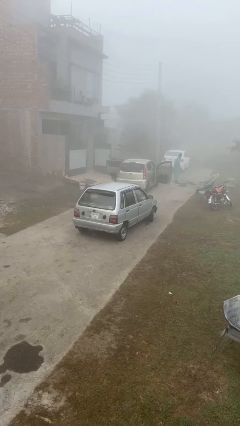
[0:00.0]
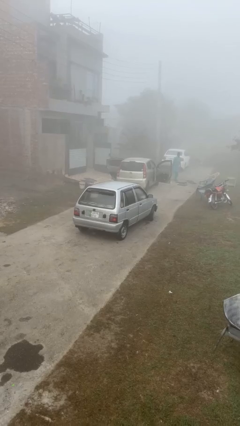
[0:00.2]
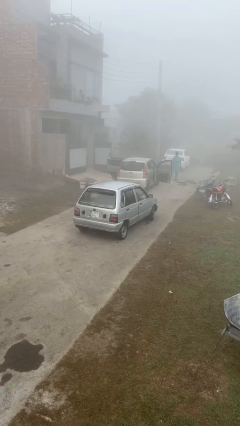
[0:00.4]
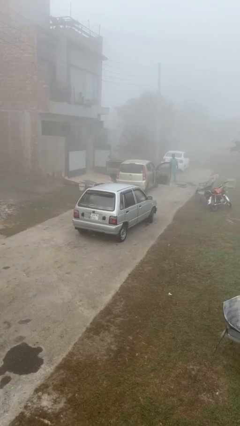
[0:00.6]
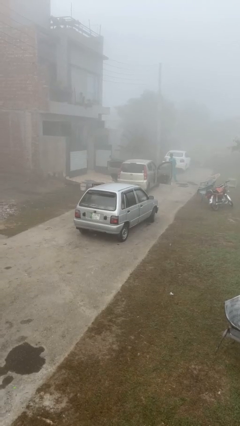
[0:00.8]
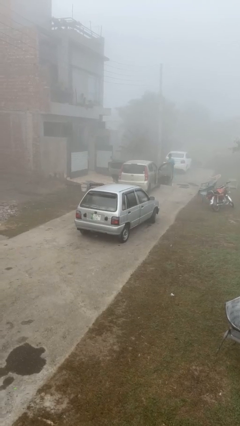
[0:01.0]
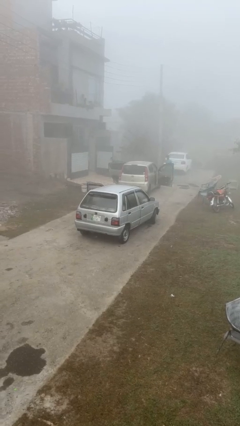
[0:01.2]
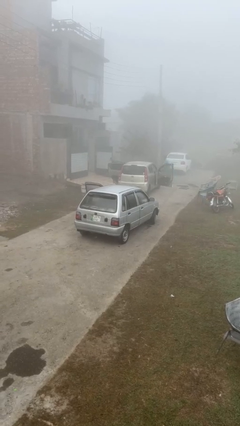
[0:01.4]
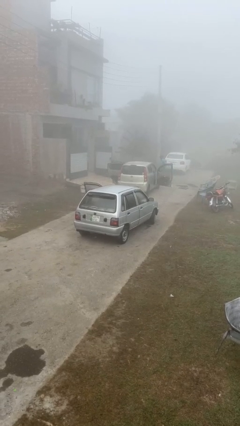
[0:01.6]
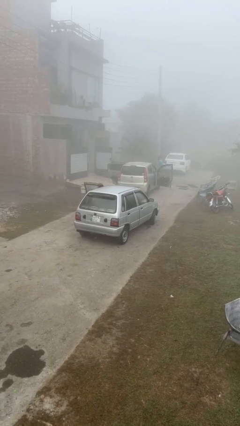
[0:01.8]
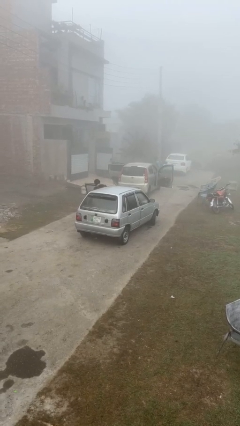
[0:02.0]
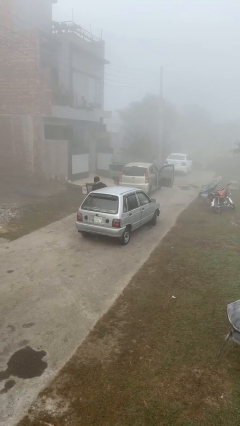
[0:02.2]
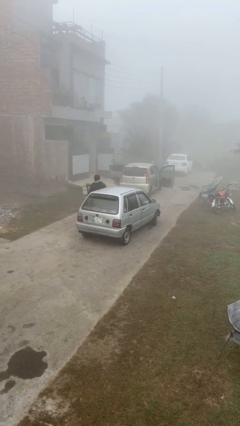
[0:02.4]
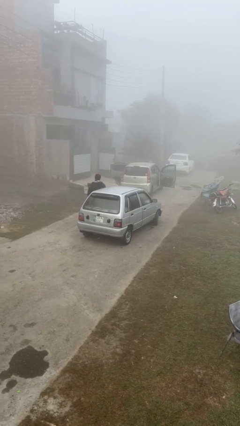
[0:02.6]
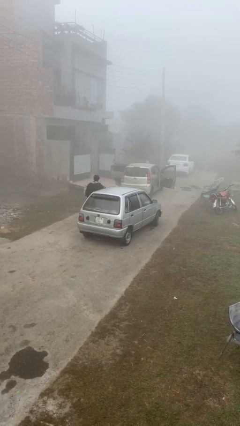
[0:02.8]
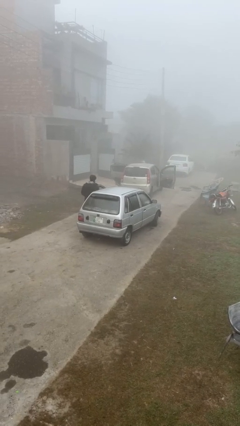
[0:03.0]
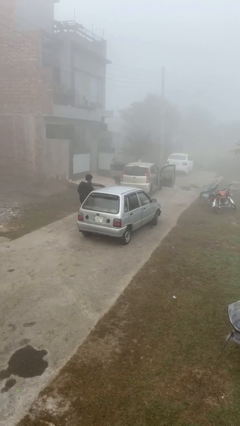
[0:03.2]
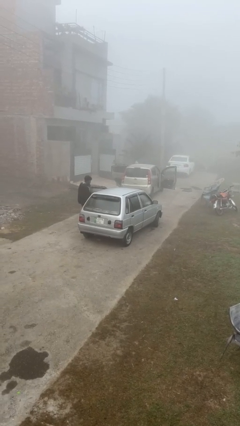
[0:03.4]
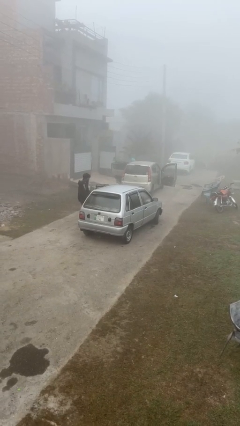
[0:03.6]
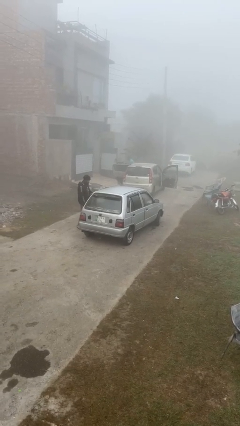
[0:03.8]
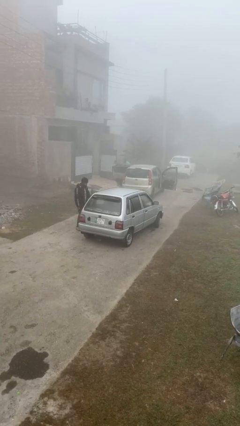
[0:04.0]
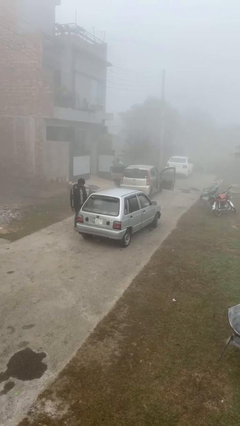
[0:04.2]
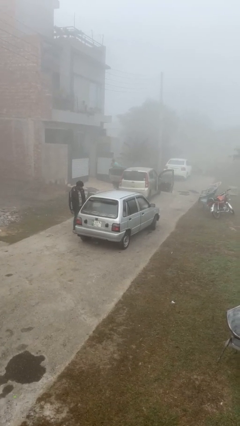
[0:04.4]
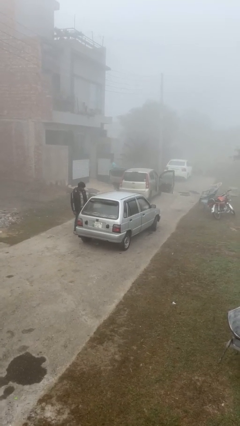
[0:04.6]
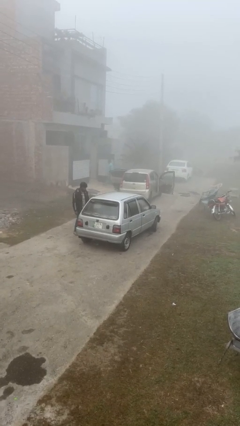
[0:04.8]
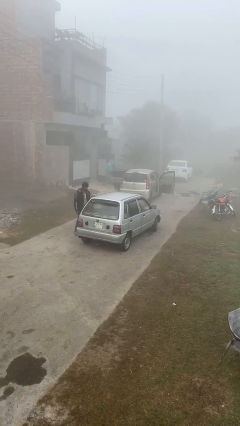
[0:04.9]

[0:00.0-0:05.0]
car drops off person

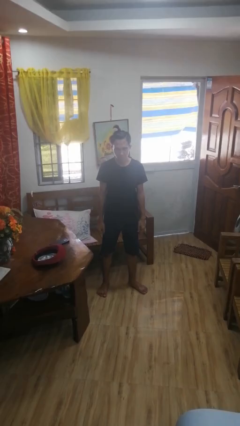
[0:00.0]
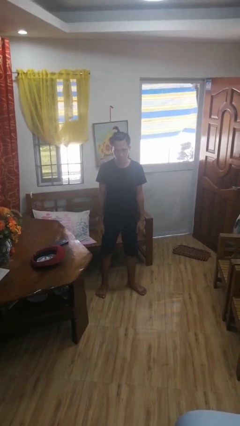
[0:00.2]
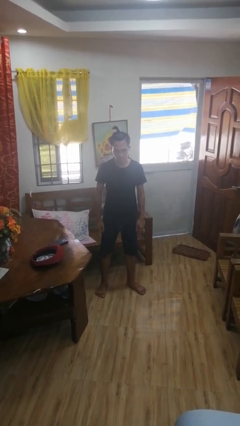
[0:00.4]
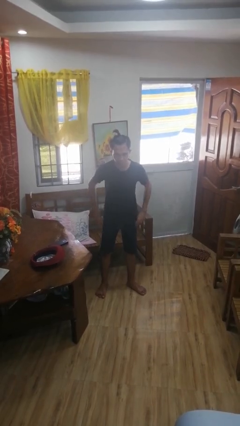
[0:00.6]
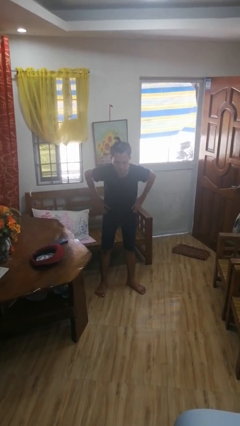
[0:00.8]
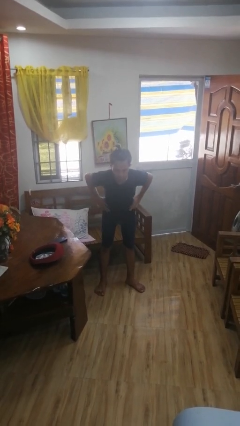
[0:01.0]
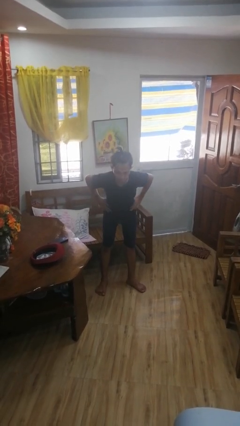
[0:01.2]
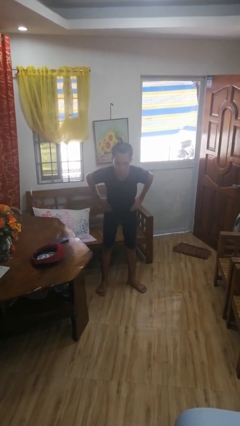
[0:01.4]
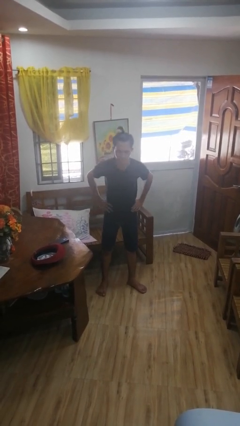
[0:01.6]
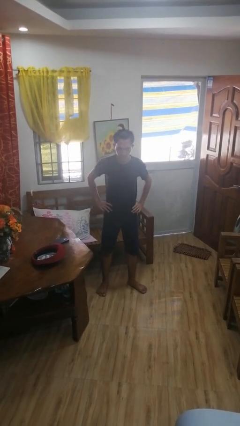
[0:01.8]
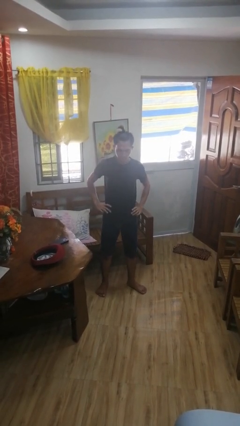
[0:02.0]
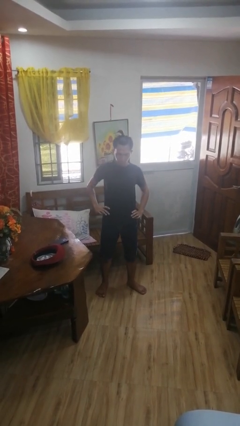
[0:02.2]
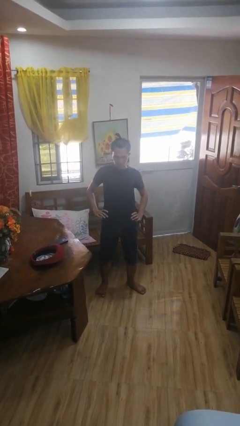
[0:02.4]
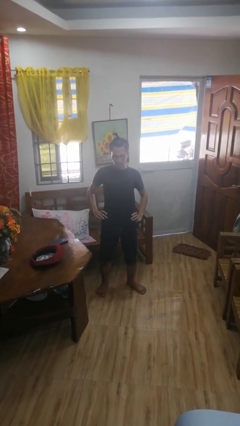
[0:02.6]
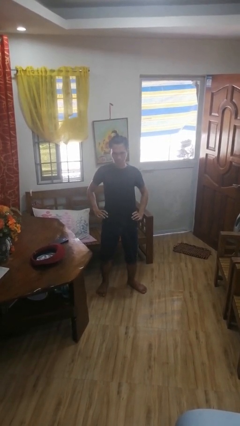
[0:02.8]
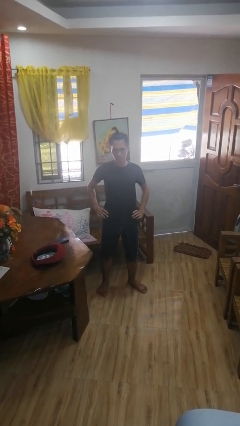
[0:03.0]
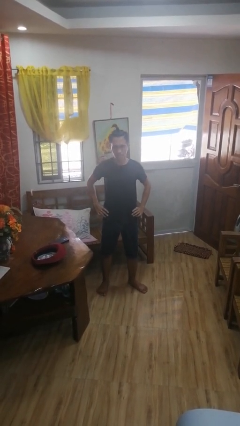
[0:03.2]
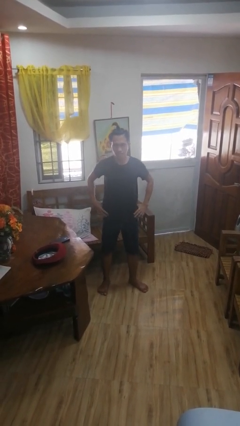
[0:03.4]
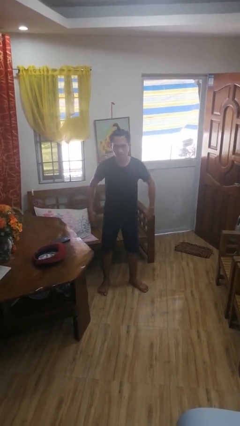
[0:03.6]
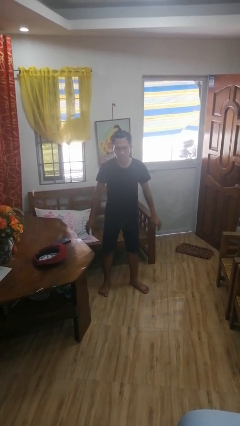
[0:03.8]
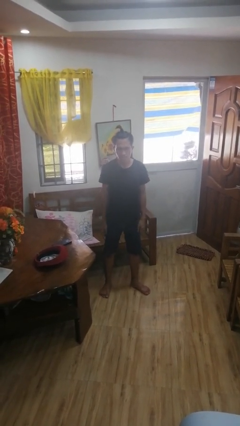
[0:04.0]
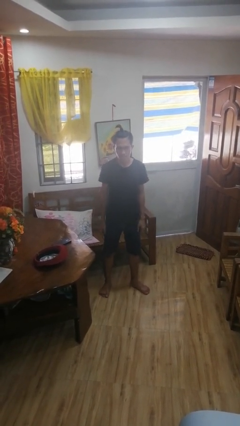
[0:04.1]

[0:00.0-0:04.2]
person wiggles hips

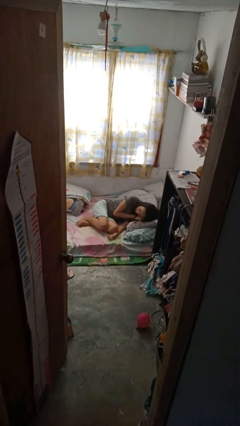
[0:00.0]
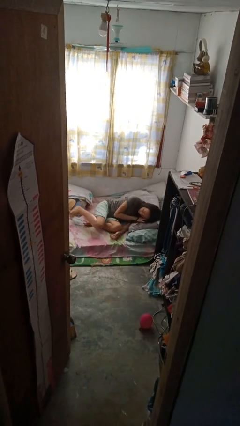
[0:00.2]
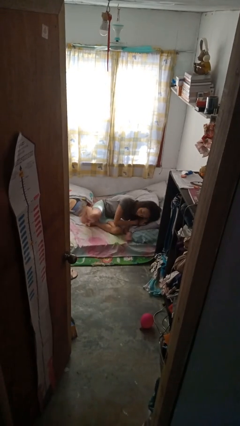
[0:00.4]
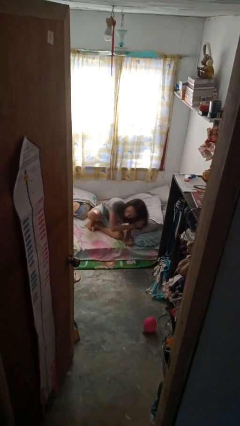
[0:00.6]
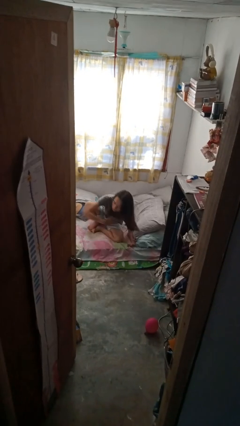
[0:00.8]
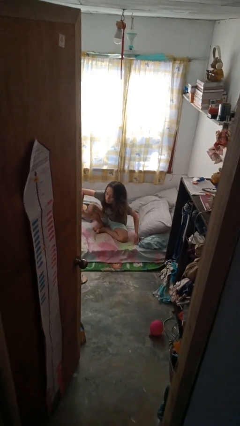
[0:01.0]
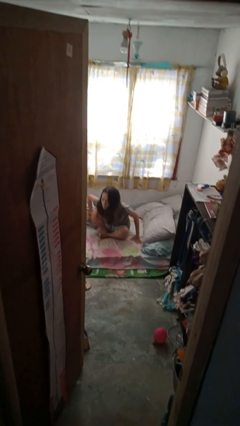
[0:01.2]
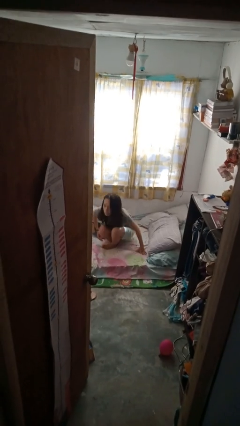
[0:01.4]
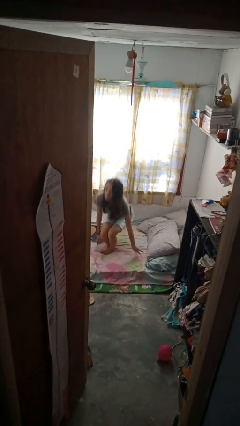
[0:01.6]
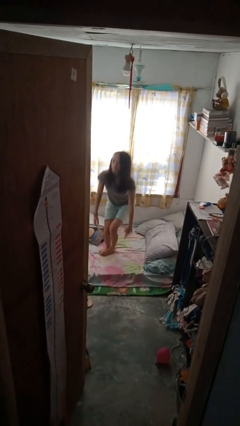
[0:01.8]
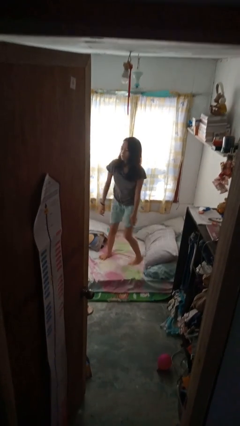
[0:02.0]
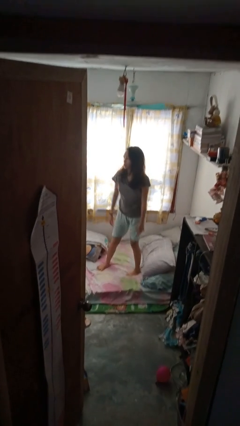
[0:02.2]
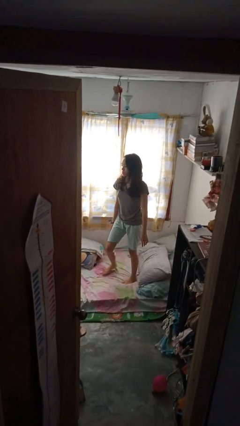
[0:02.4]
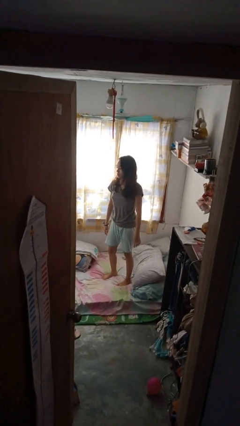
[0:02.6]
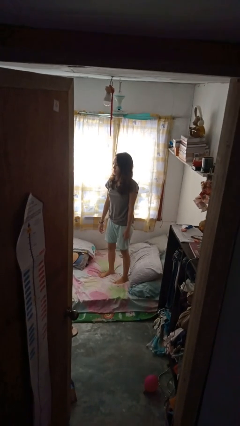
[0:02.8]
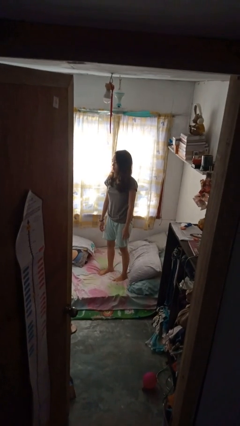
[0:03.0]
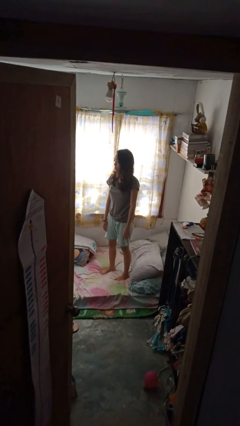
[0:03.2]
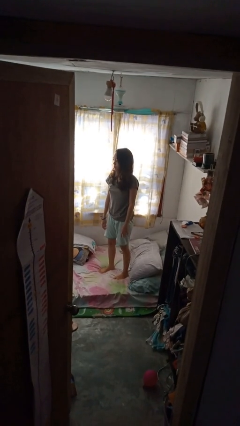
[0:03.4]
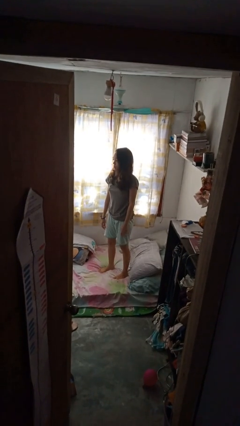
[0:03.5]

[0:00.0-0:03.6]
person stands up

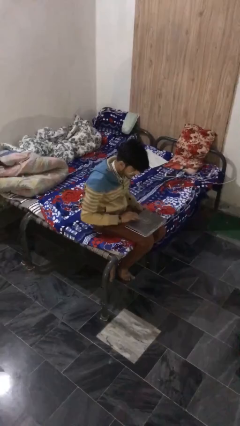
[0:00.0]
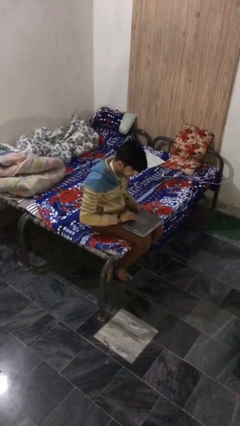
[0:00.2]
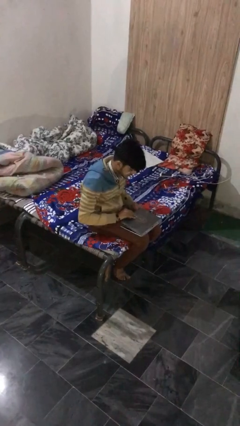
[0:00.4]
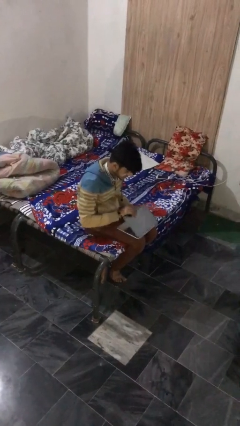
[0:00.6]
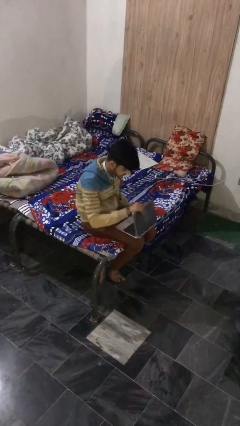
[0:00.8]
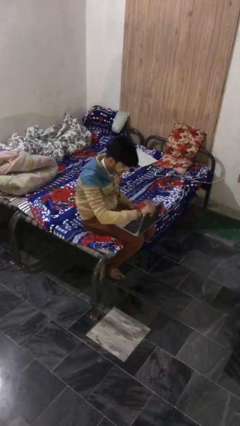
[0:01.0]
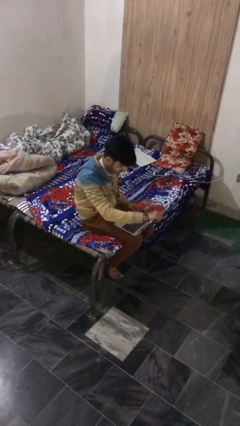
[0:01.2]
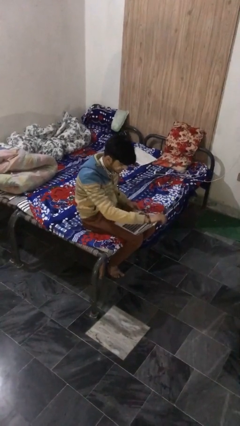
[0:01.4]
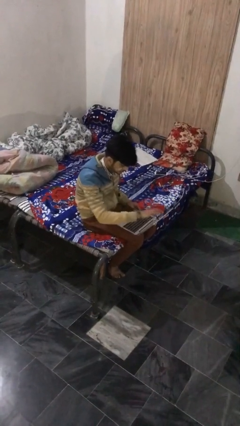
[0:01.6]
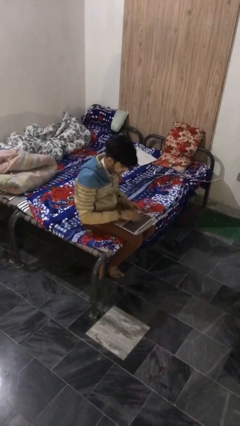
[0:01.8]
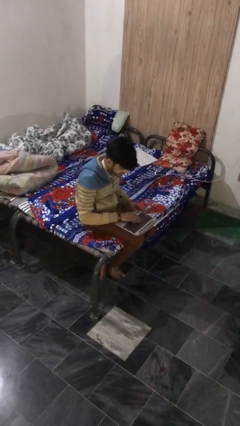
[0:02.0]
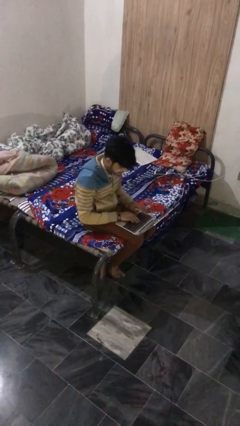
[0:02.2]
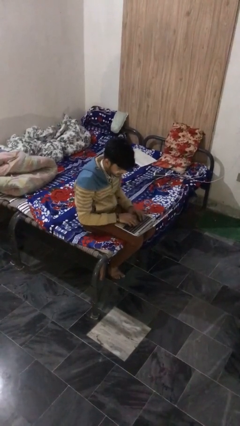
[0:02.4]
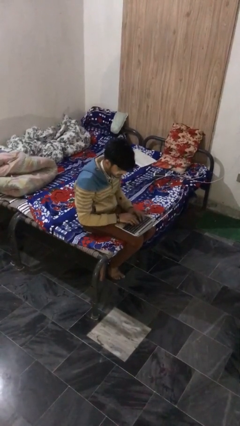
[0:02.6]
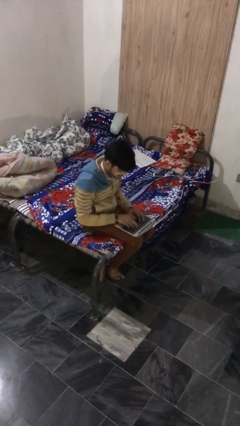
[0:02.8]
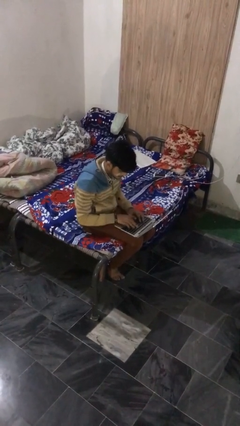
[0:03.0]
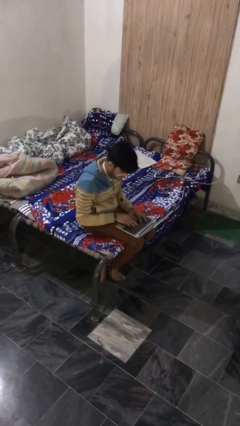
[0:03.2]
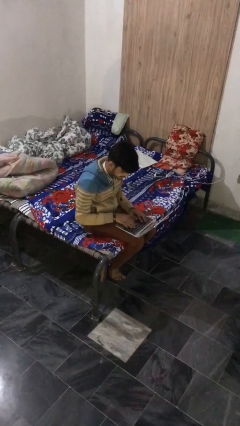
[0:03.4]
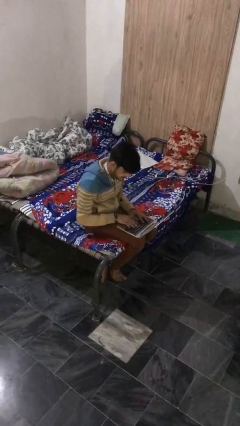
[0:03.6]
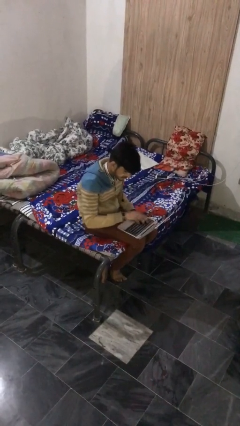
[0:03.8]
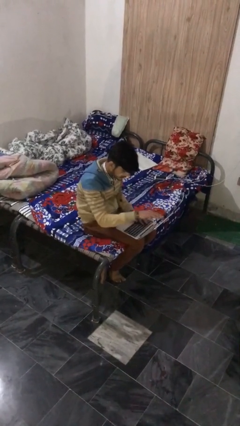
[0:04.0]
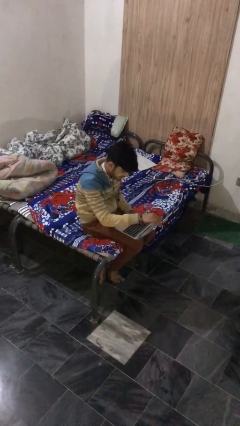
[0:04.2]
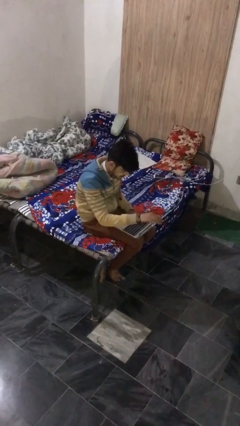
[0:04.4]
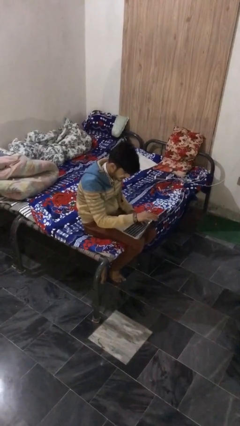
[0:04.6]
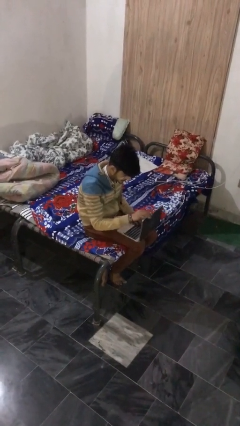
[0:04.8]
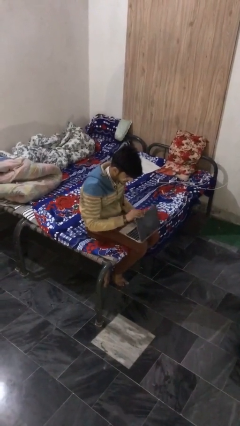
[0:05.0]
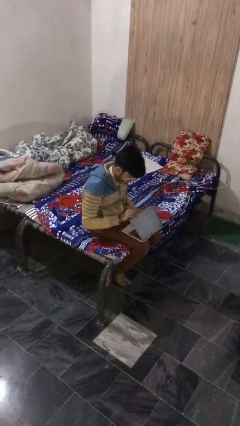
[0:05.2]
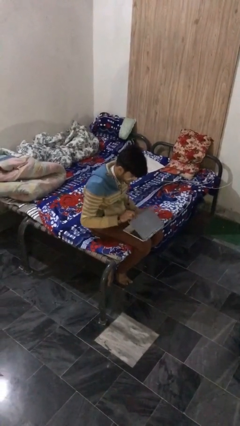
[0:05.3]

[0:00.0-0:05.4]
person interacts with laptop
